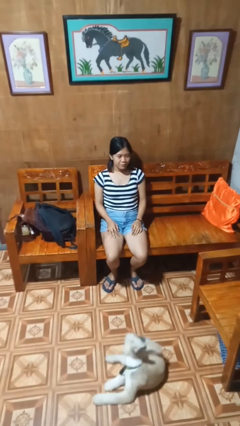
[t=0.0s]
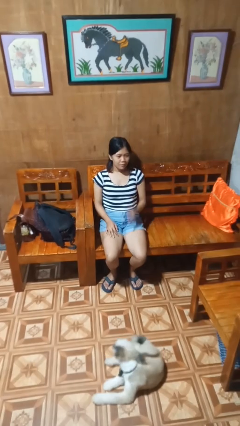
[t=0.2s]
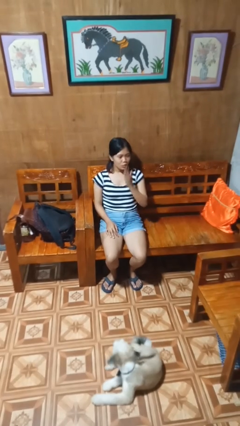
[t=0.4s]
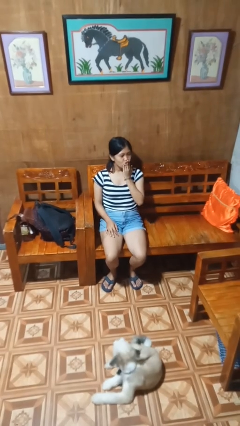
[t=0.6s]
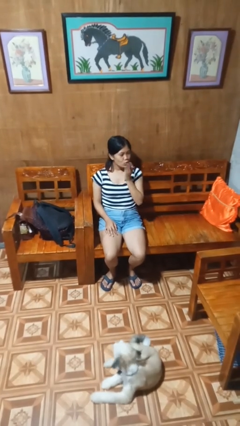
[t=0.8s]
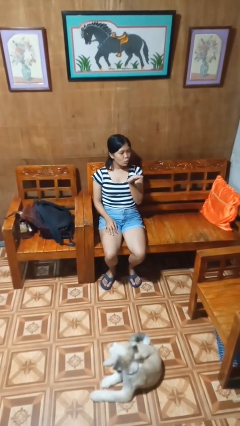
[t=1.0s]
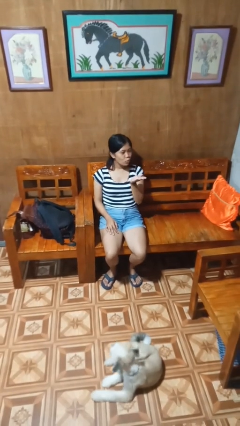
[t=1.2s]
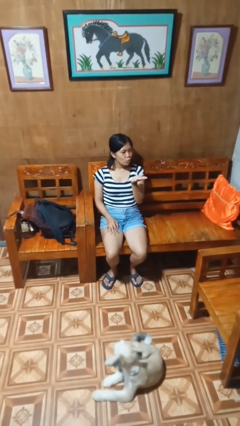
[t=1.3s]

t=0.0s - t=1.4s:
person gestures blow kiss

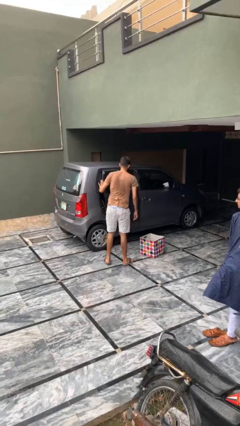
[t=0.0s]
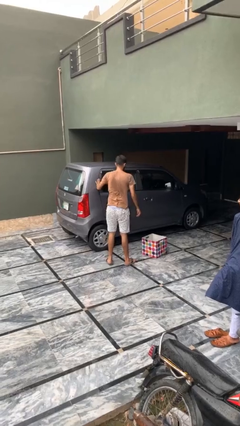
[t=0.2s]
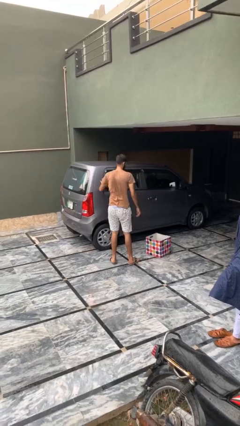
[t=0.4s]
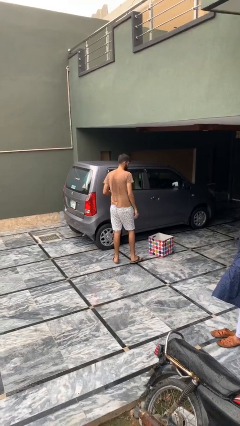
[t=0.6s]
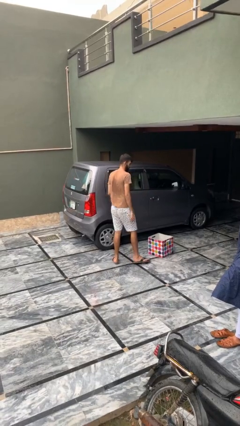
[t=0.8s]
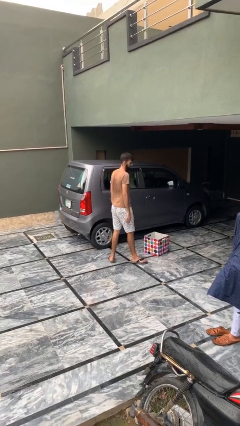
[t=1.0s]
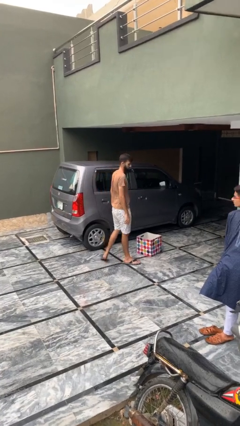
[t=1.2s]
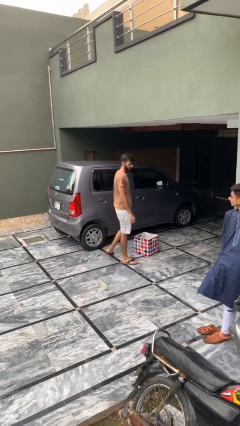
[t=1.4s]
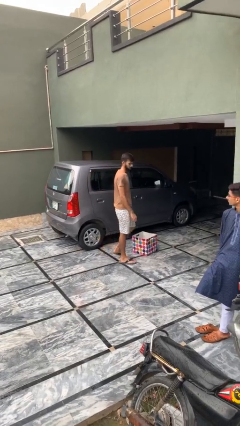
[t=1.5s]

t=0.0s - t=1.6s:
person closes car door

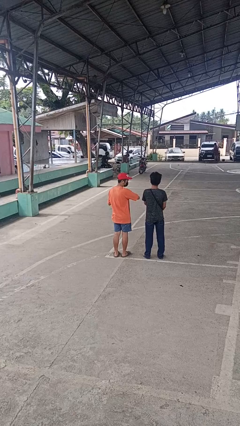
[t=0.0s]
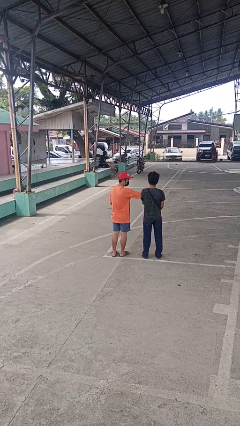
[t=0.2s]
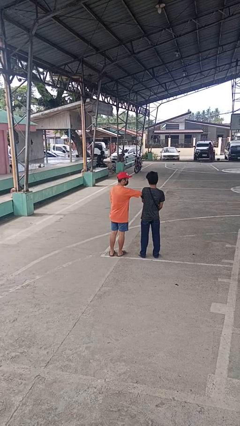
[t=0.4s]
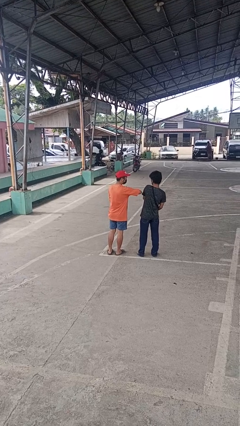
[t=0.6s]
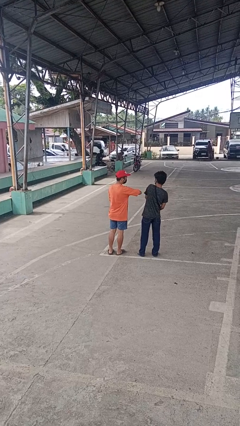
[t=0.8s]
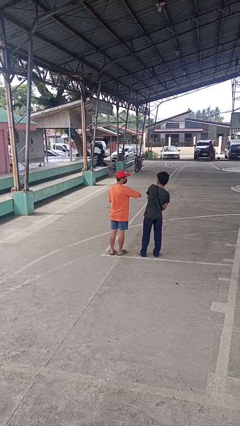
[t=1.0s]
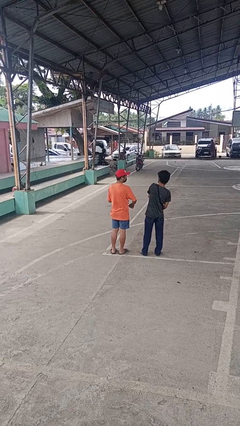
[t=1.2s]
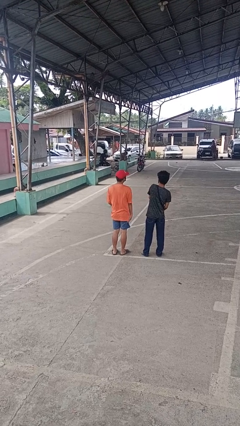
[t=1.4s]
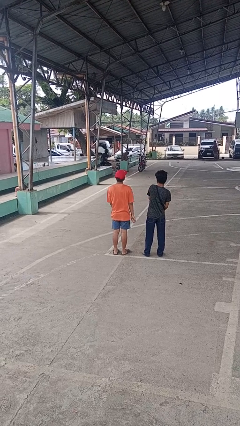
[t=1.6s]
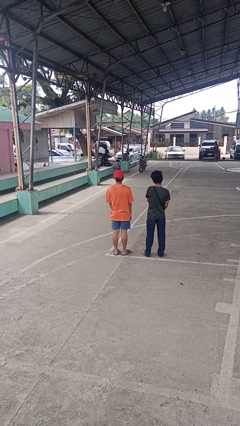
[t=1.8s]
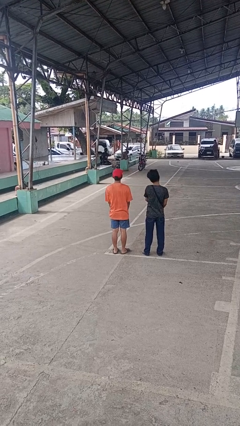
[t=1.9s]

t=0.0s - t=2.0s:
person nudges person with elbow

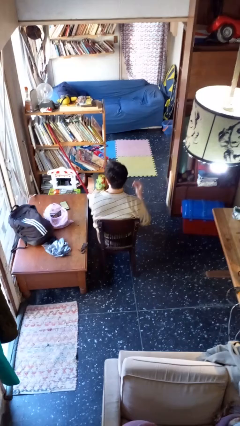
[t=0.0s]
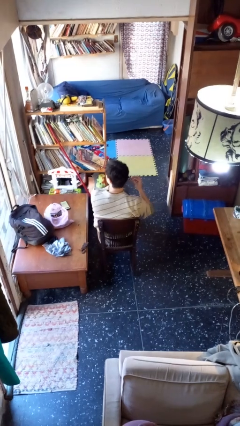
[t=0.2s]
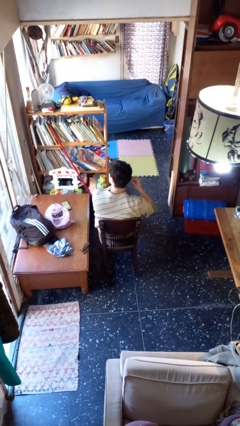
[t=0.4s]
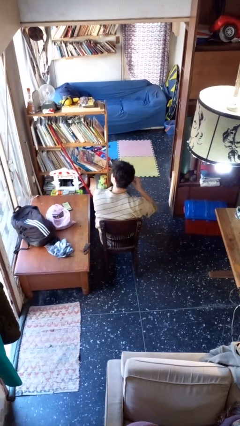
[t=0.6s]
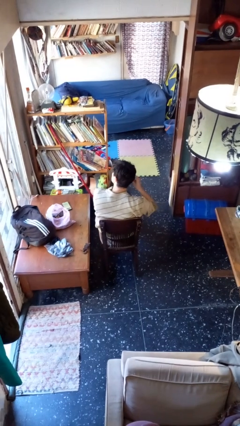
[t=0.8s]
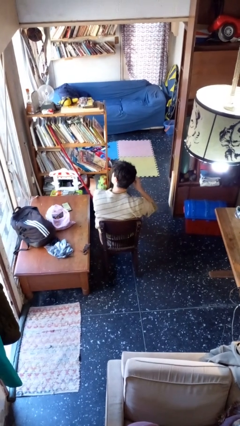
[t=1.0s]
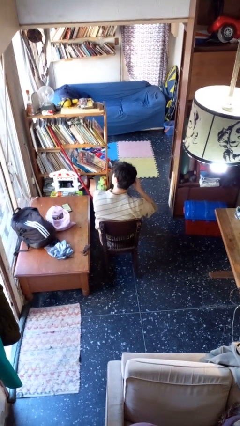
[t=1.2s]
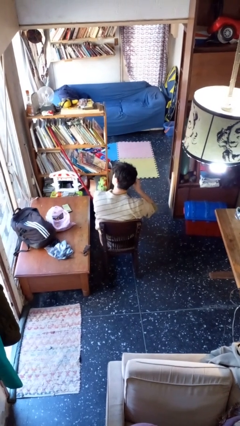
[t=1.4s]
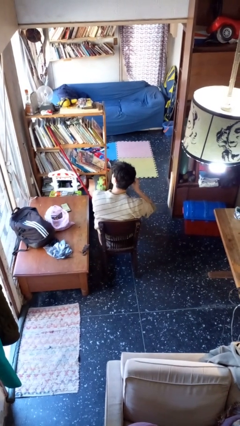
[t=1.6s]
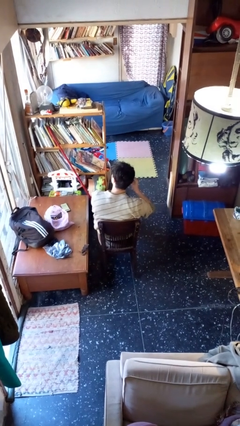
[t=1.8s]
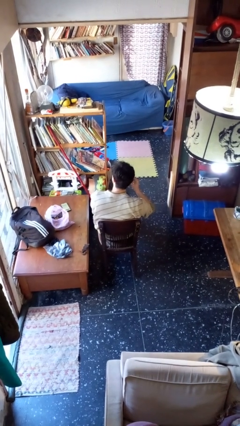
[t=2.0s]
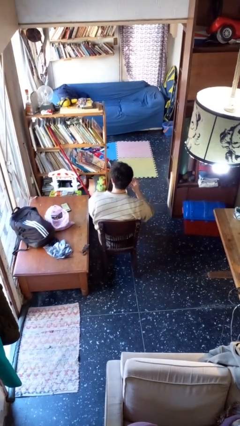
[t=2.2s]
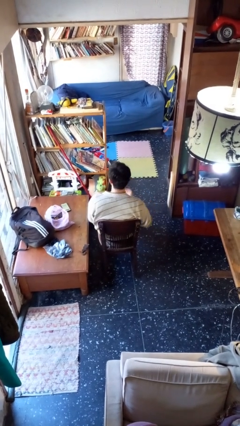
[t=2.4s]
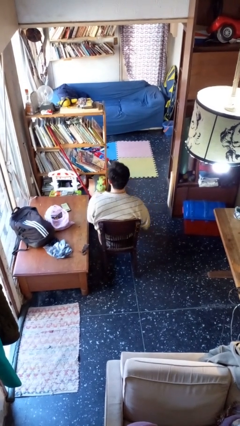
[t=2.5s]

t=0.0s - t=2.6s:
person puts on earrings

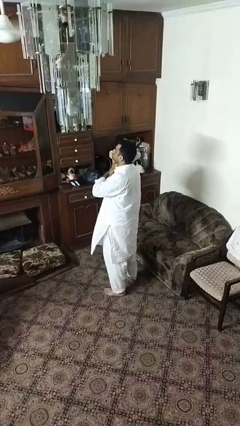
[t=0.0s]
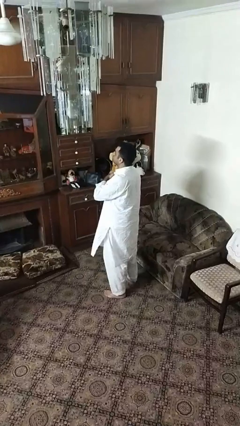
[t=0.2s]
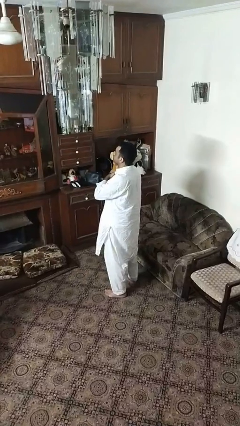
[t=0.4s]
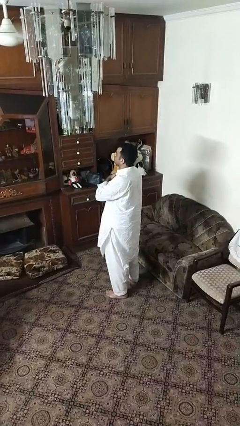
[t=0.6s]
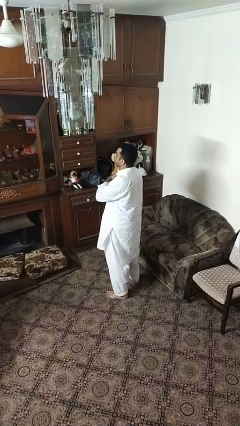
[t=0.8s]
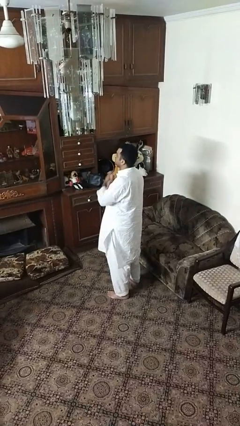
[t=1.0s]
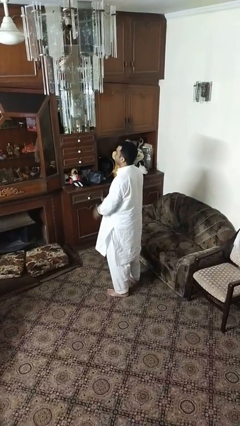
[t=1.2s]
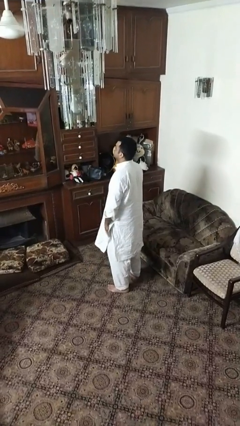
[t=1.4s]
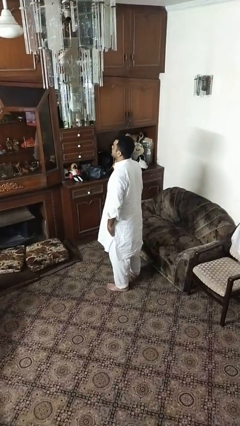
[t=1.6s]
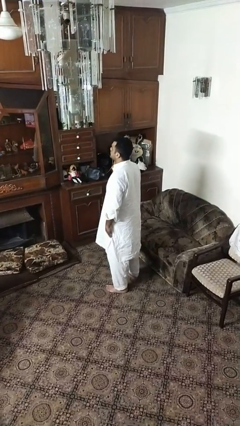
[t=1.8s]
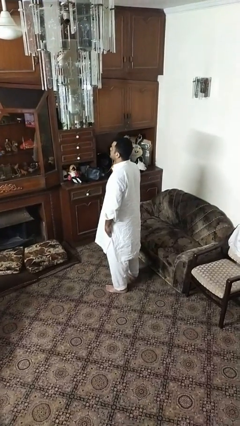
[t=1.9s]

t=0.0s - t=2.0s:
person gestures arms x

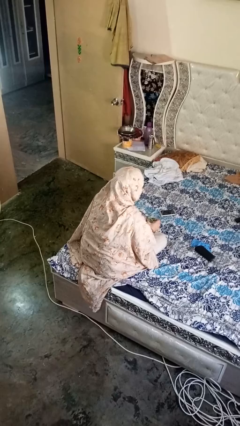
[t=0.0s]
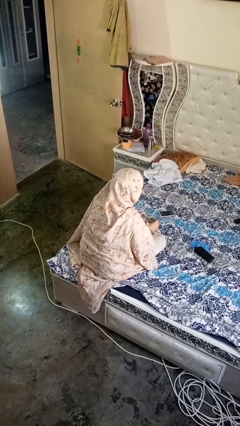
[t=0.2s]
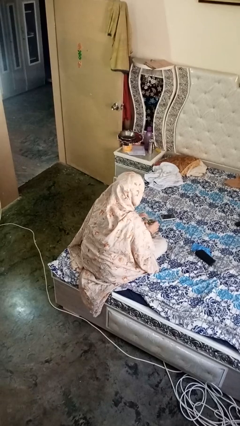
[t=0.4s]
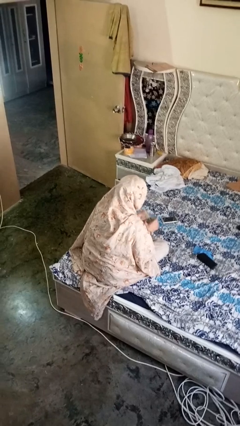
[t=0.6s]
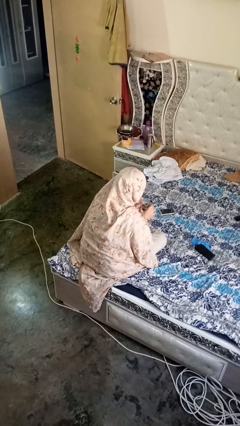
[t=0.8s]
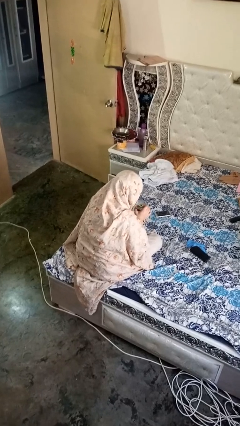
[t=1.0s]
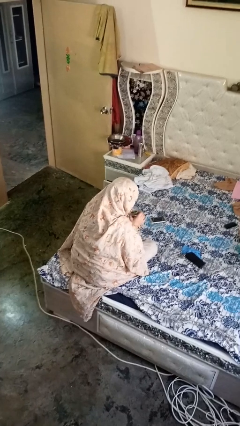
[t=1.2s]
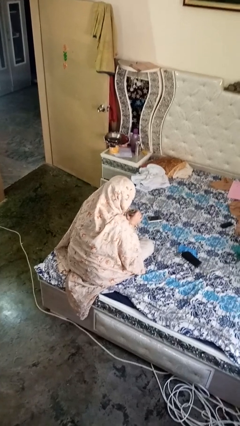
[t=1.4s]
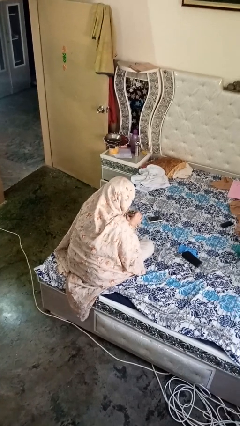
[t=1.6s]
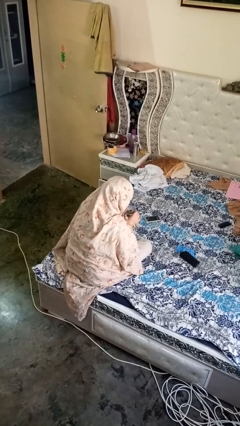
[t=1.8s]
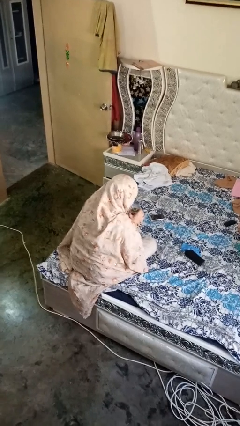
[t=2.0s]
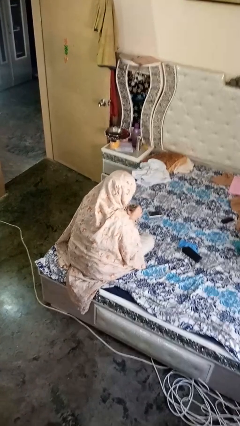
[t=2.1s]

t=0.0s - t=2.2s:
person drinks from straw

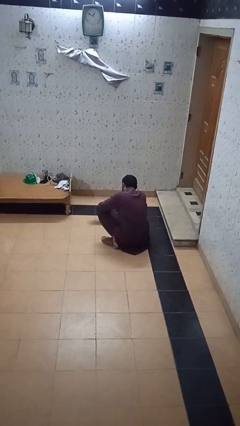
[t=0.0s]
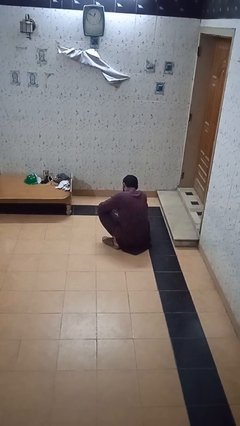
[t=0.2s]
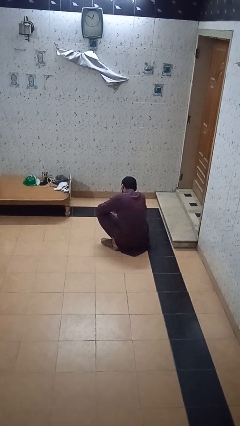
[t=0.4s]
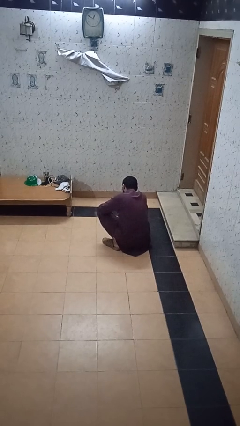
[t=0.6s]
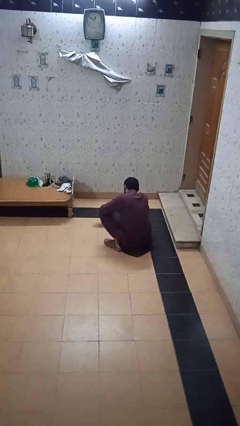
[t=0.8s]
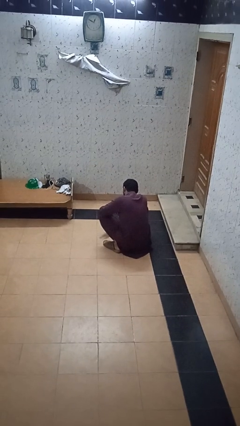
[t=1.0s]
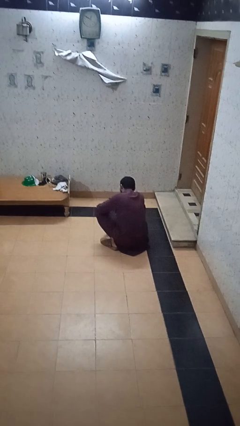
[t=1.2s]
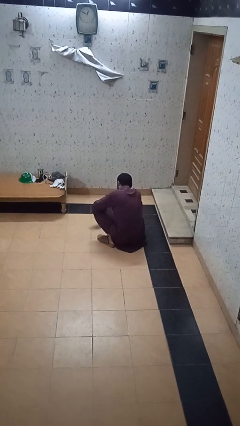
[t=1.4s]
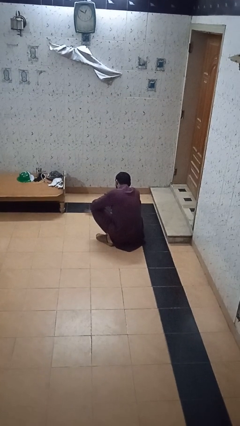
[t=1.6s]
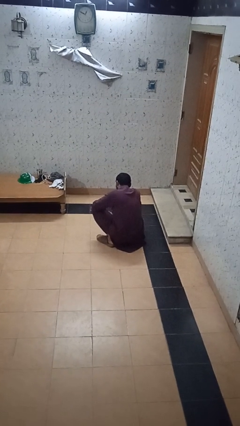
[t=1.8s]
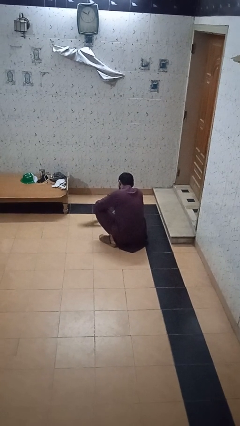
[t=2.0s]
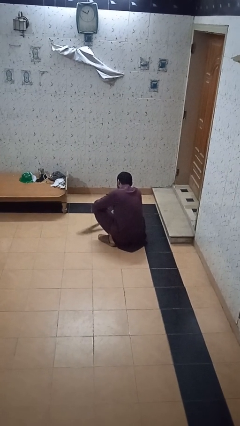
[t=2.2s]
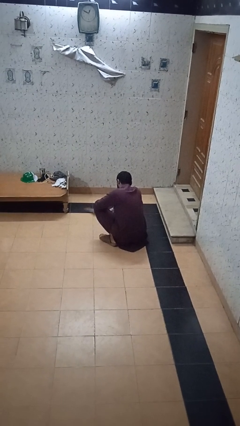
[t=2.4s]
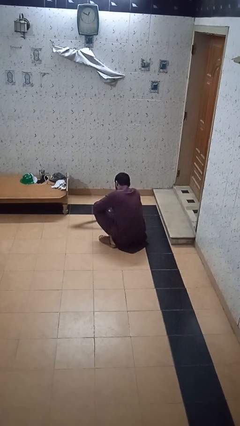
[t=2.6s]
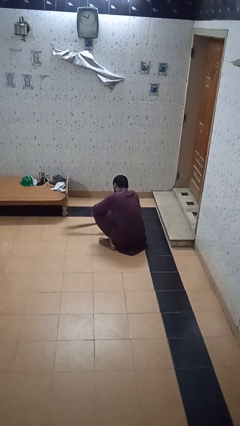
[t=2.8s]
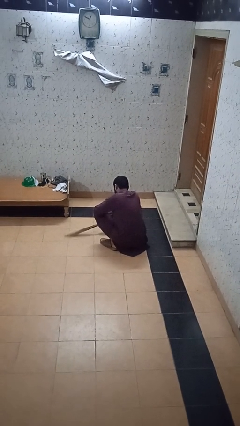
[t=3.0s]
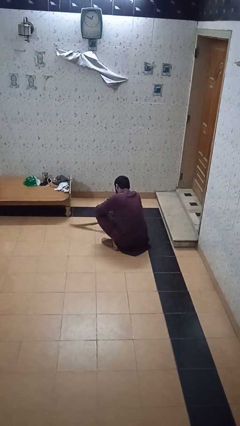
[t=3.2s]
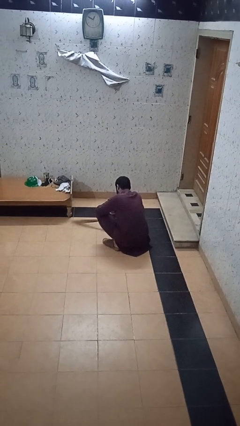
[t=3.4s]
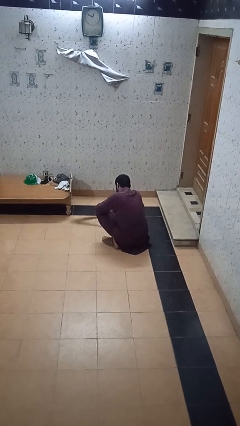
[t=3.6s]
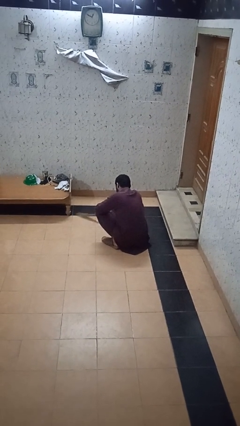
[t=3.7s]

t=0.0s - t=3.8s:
person sweeps floor

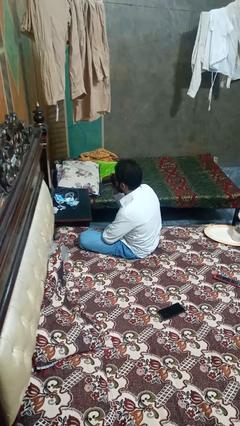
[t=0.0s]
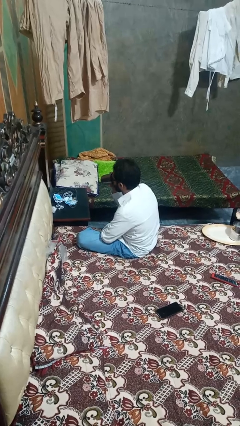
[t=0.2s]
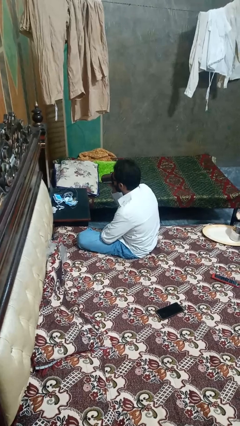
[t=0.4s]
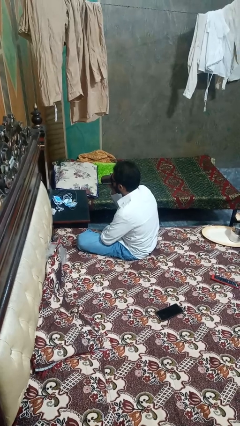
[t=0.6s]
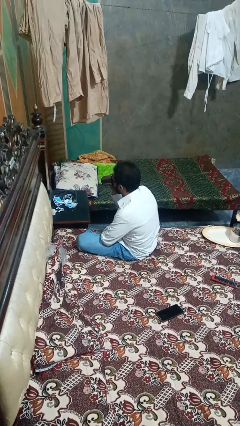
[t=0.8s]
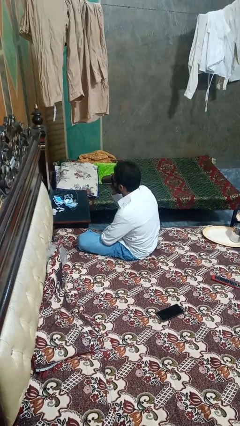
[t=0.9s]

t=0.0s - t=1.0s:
person drinks from mug
